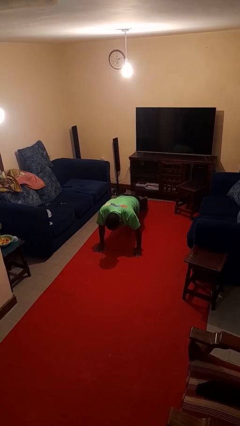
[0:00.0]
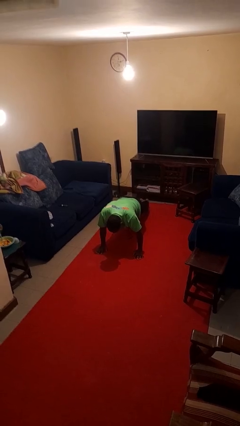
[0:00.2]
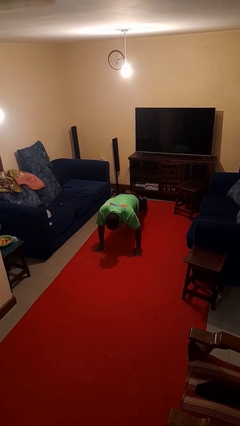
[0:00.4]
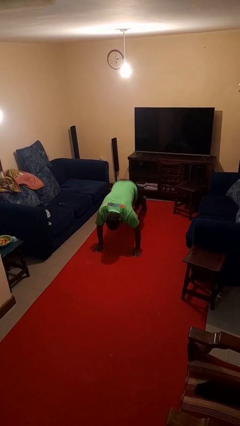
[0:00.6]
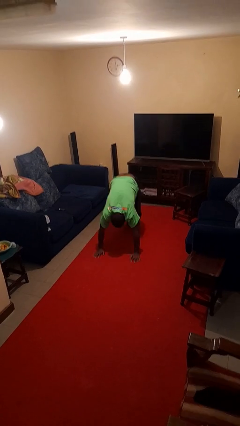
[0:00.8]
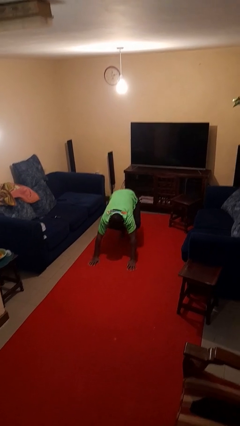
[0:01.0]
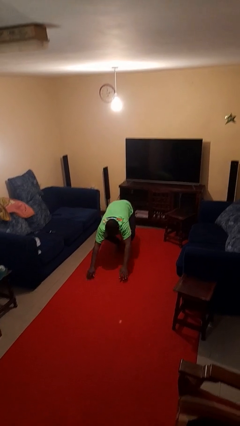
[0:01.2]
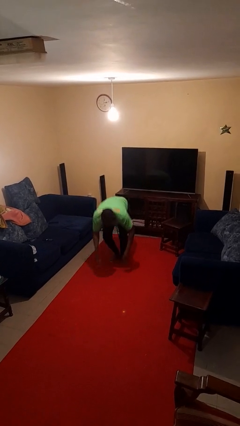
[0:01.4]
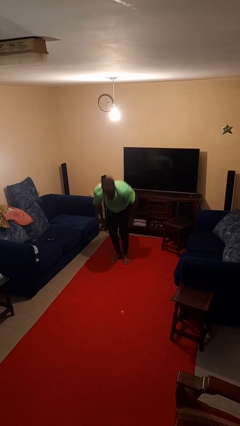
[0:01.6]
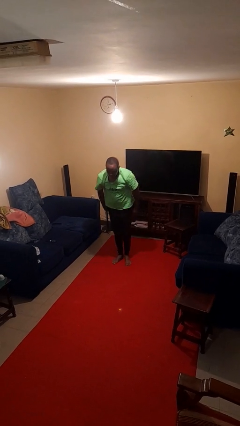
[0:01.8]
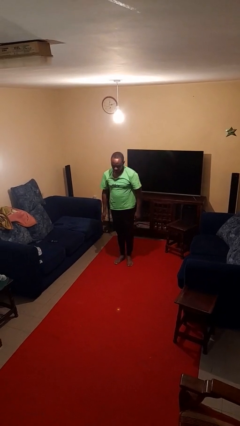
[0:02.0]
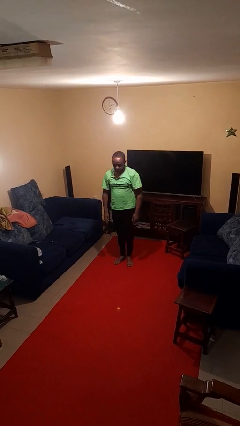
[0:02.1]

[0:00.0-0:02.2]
person stands up from floor

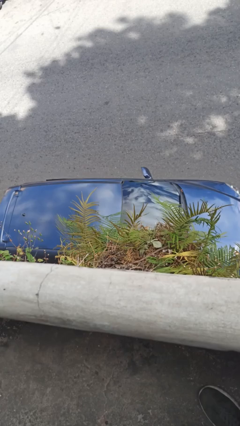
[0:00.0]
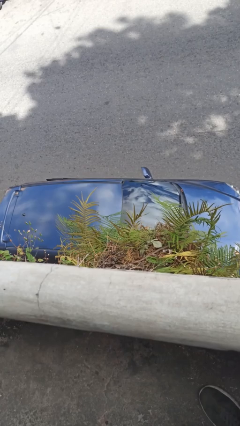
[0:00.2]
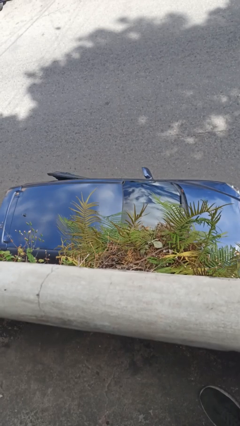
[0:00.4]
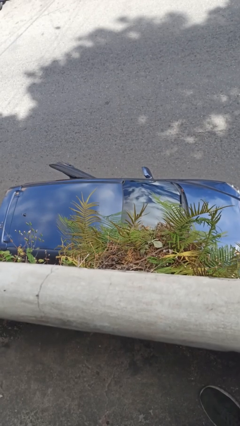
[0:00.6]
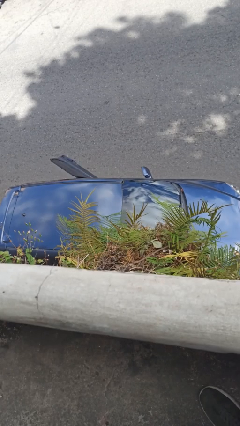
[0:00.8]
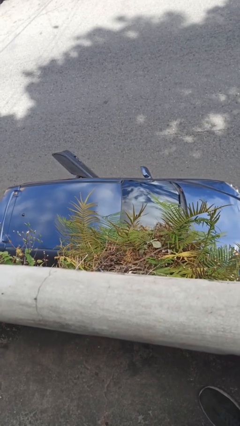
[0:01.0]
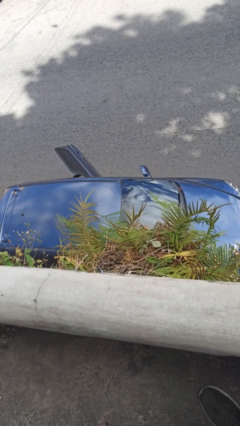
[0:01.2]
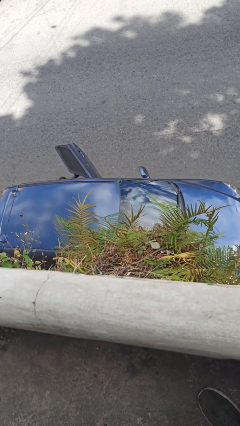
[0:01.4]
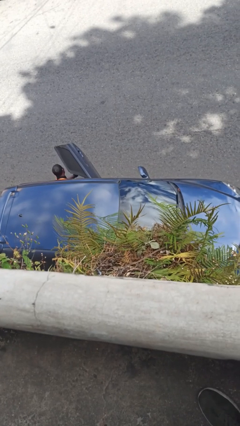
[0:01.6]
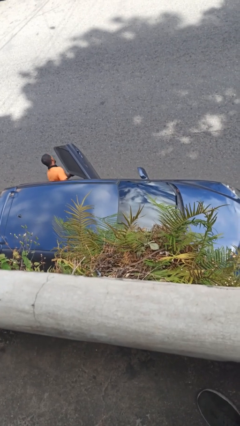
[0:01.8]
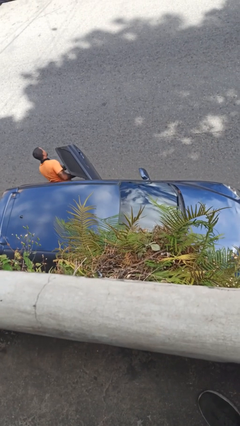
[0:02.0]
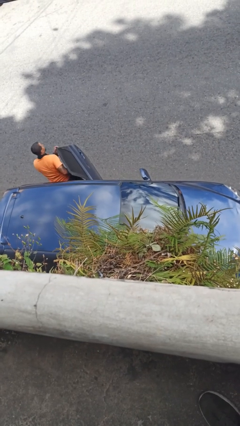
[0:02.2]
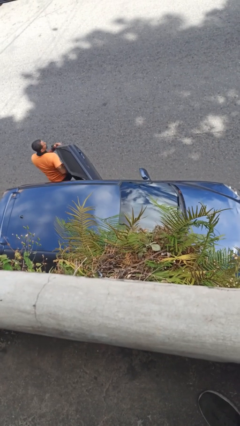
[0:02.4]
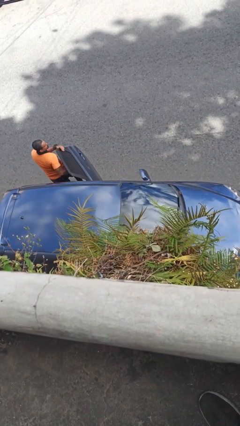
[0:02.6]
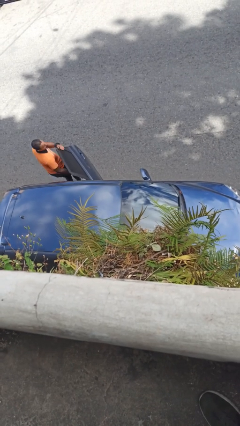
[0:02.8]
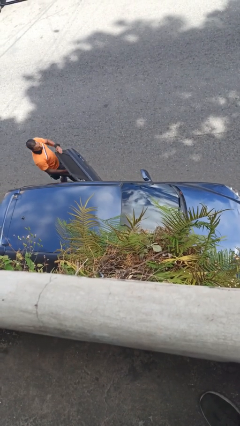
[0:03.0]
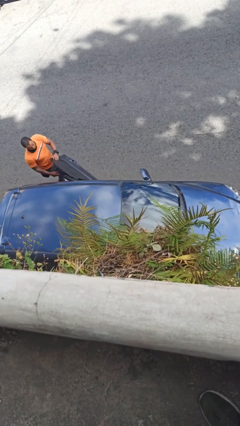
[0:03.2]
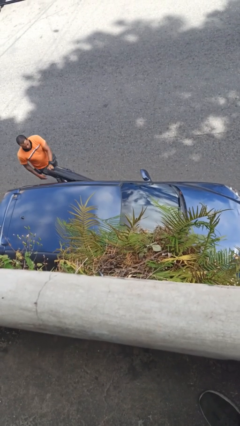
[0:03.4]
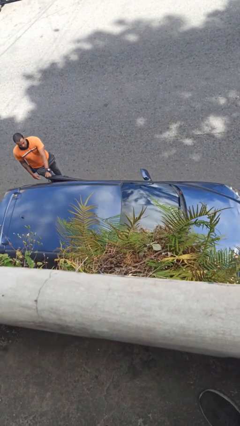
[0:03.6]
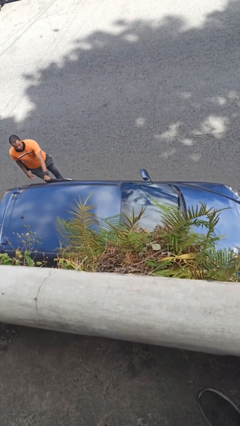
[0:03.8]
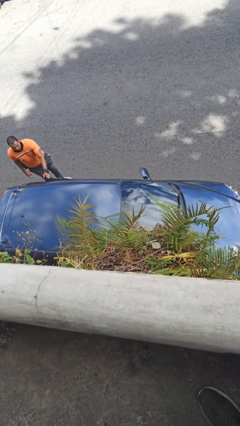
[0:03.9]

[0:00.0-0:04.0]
car drops off person

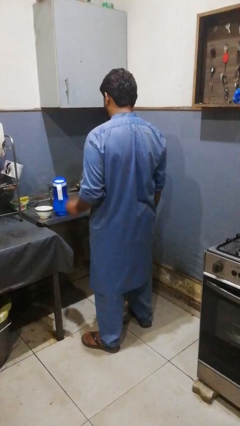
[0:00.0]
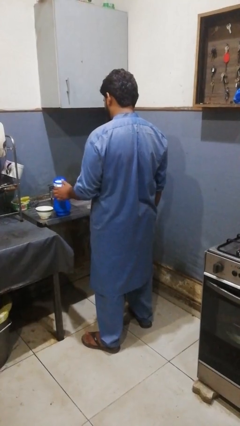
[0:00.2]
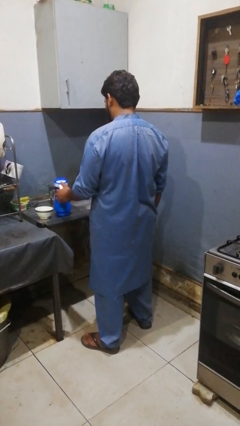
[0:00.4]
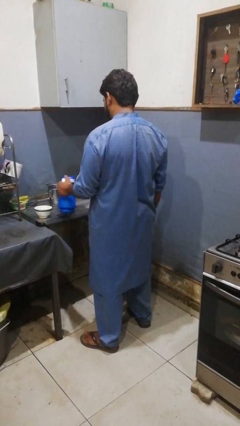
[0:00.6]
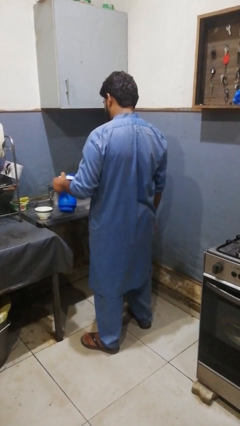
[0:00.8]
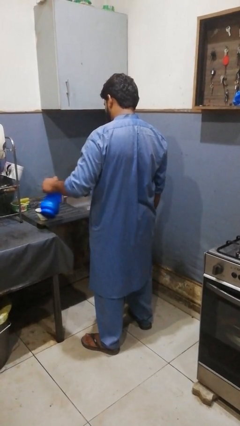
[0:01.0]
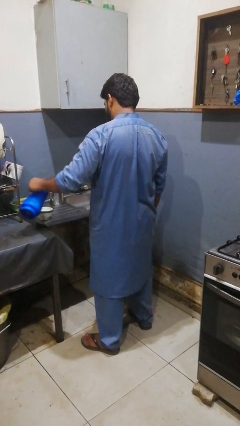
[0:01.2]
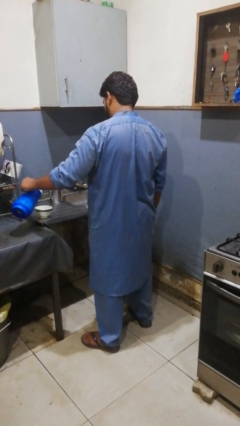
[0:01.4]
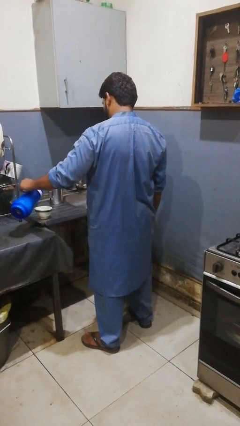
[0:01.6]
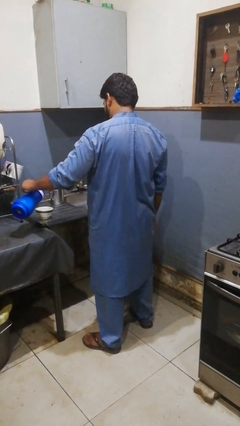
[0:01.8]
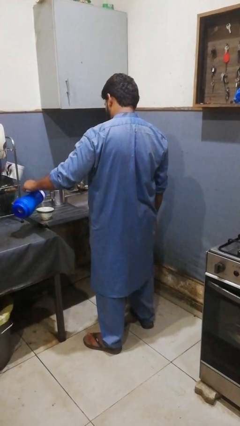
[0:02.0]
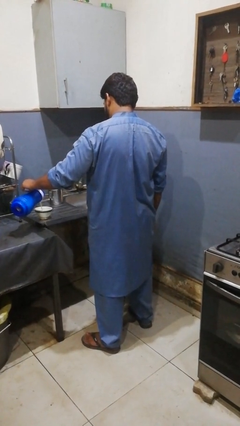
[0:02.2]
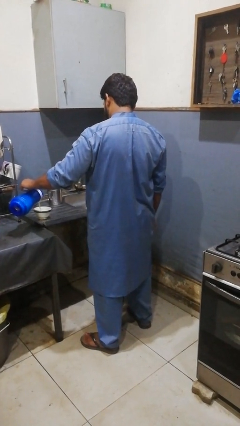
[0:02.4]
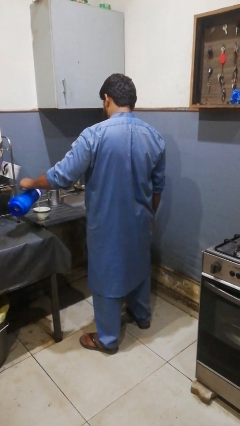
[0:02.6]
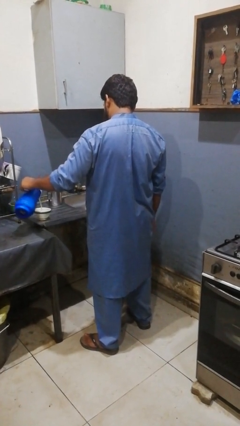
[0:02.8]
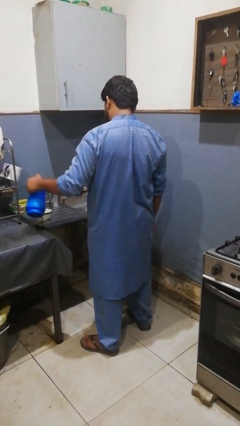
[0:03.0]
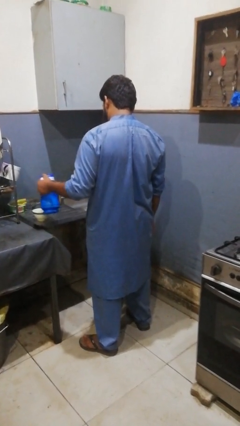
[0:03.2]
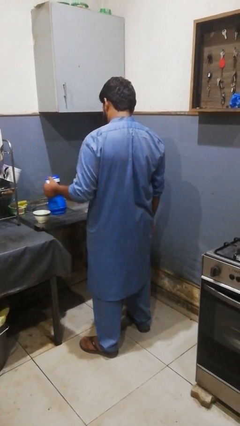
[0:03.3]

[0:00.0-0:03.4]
person pours into bowl

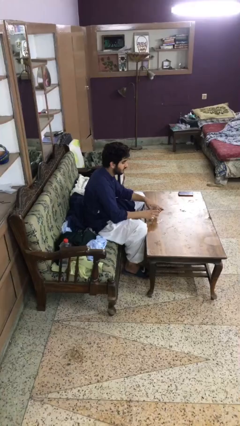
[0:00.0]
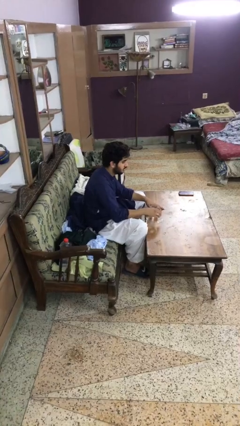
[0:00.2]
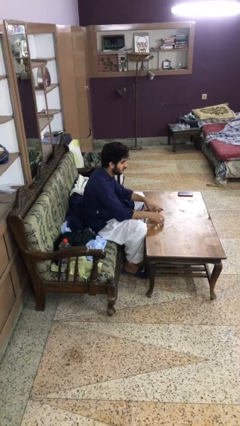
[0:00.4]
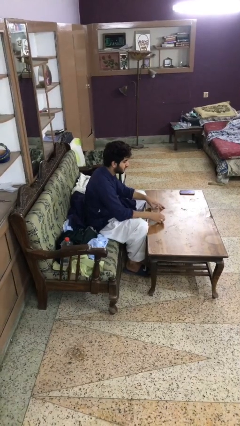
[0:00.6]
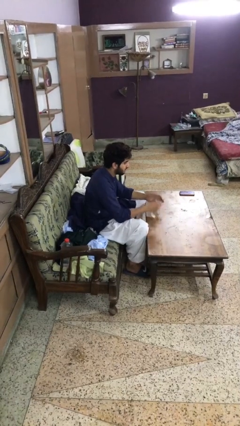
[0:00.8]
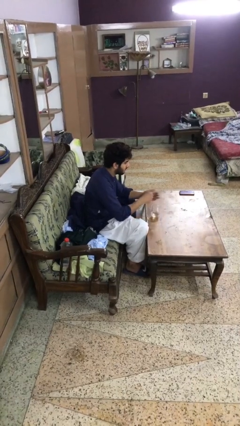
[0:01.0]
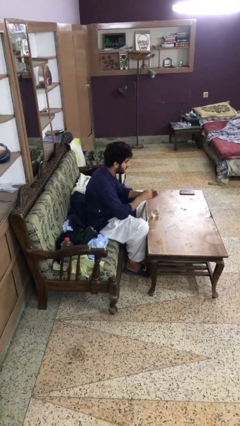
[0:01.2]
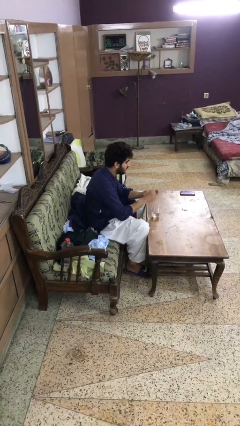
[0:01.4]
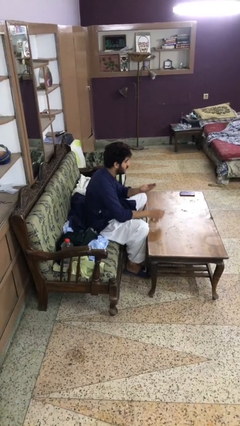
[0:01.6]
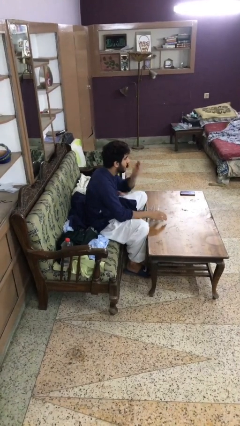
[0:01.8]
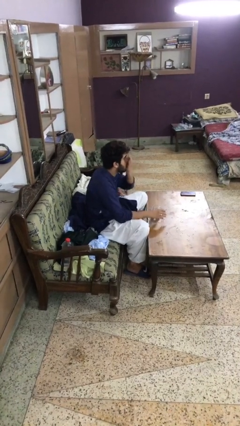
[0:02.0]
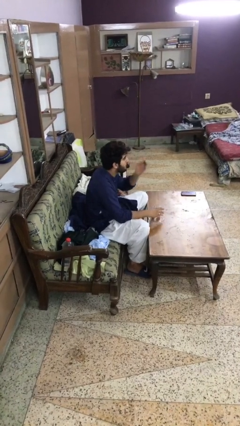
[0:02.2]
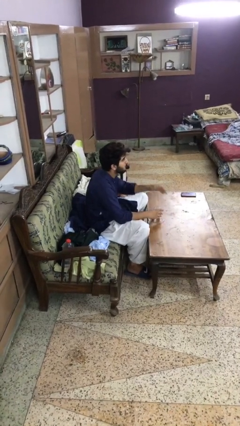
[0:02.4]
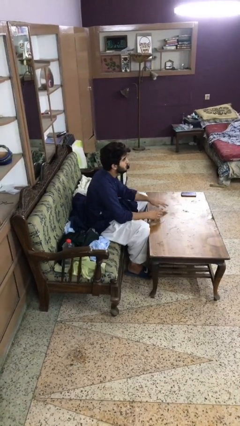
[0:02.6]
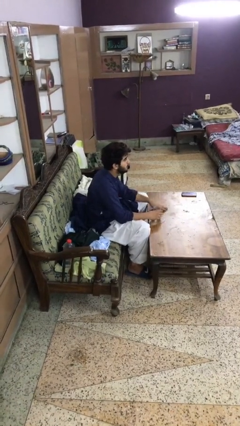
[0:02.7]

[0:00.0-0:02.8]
person takes medicine pills

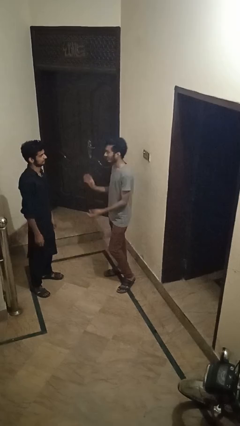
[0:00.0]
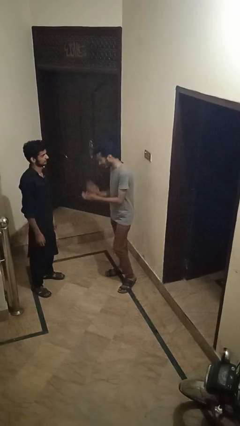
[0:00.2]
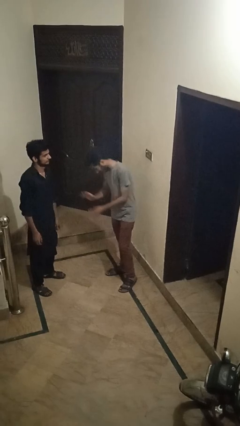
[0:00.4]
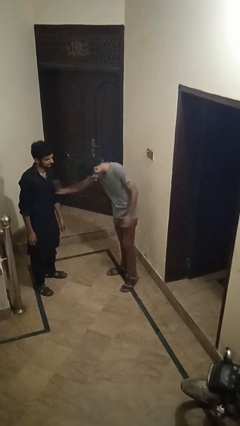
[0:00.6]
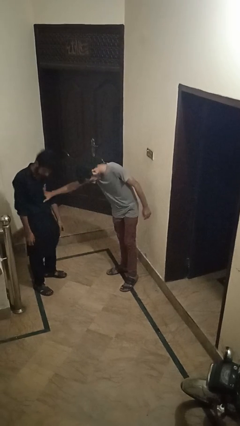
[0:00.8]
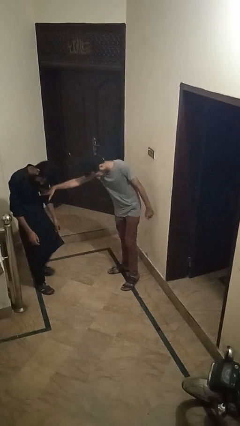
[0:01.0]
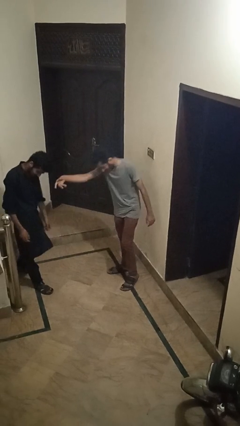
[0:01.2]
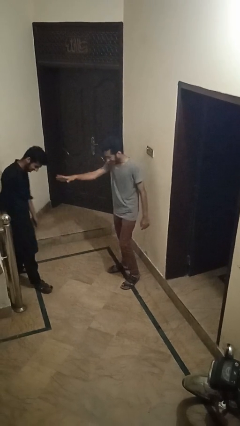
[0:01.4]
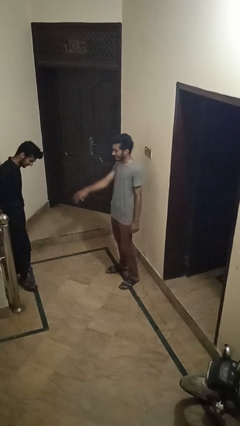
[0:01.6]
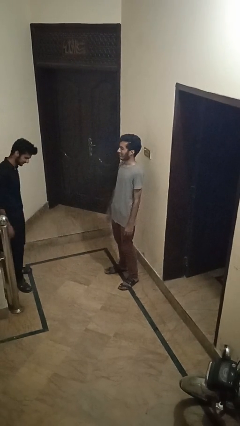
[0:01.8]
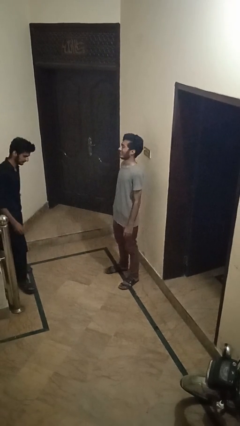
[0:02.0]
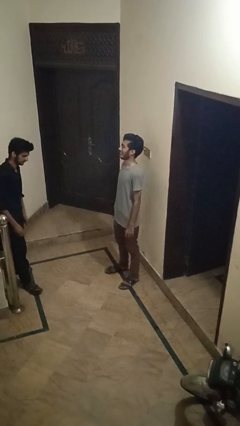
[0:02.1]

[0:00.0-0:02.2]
person shoves person

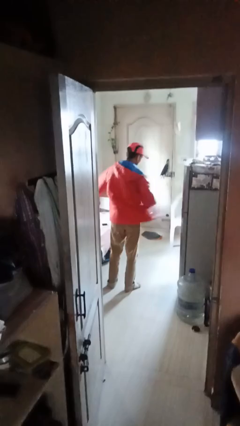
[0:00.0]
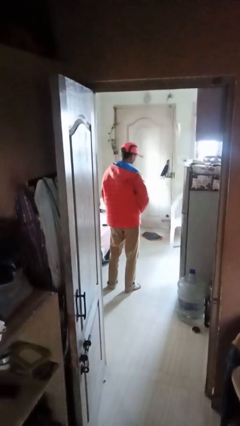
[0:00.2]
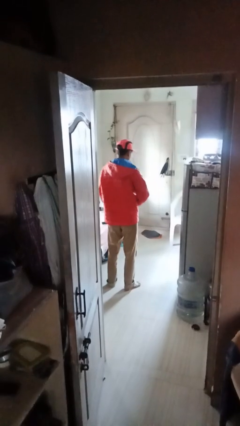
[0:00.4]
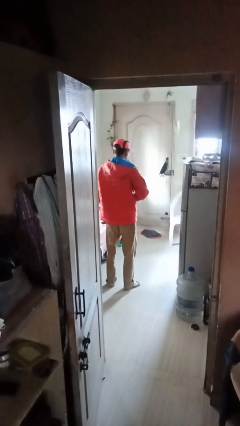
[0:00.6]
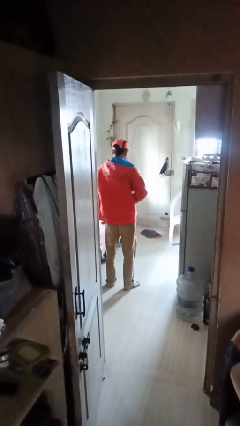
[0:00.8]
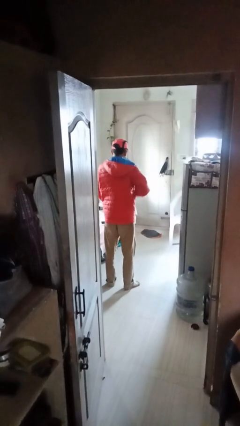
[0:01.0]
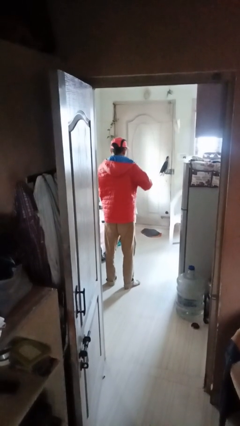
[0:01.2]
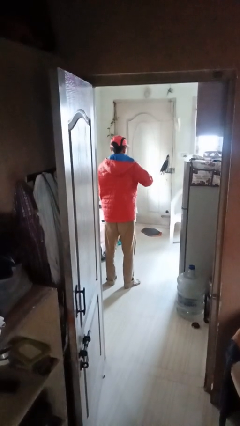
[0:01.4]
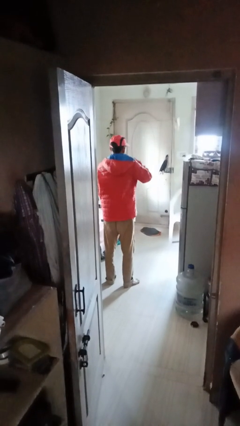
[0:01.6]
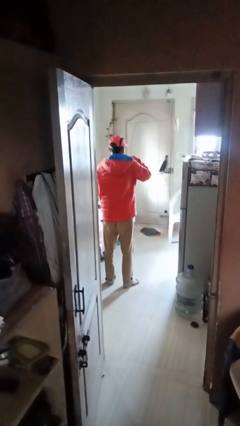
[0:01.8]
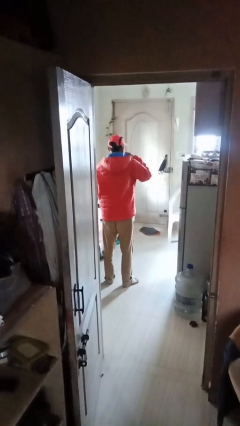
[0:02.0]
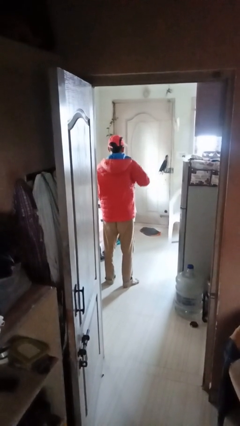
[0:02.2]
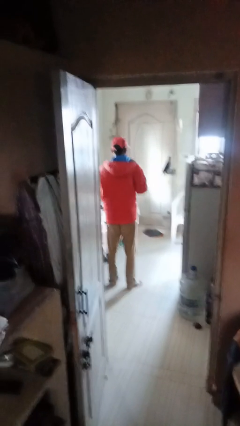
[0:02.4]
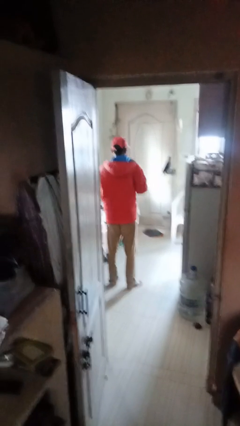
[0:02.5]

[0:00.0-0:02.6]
person zips up jacket
